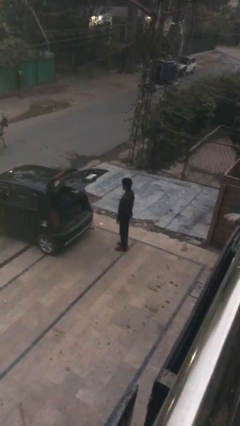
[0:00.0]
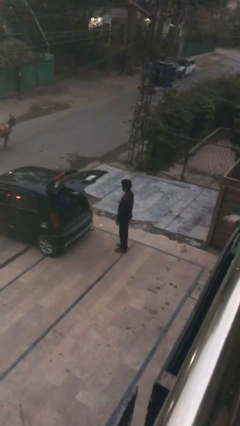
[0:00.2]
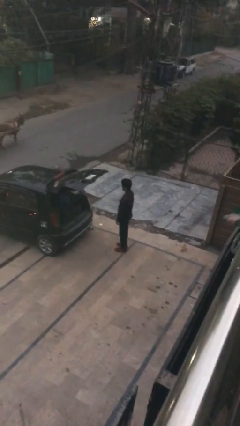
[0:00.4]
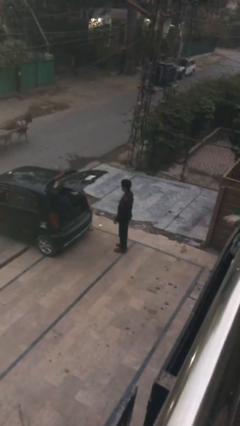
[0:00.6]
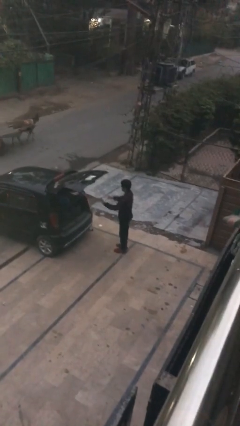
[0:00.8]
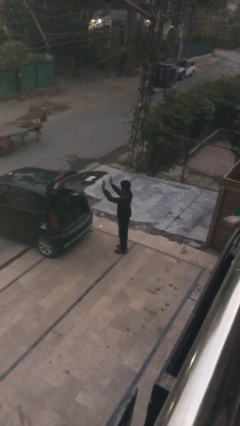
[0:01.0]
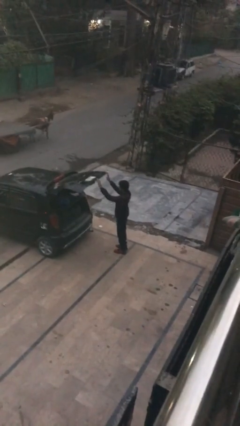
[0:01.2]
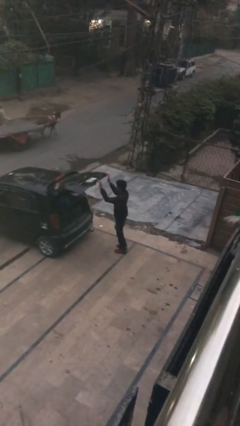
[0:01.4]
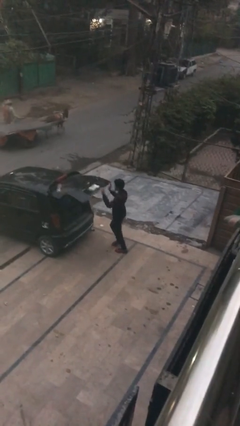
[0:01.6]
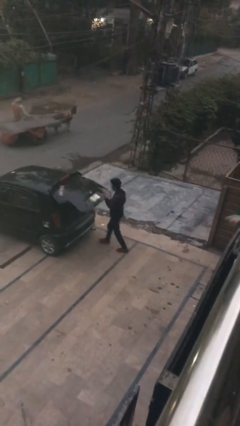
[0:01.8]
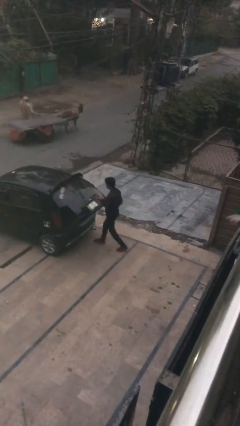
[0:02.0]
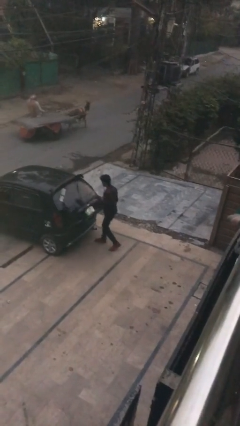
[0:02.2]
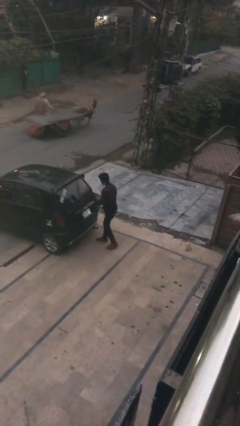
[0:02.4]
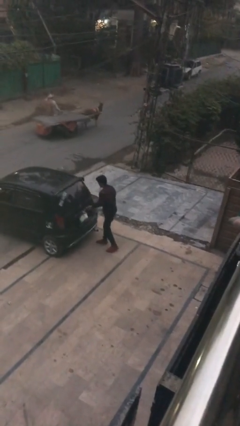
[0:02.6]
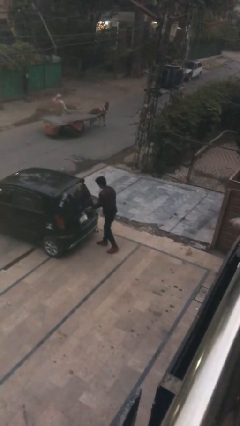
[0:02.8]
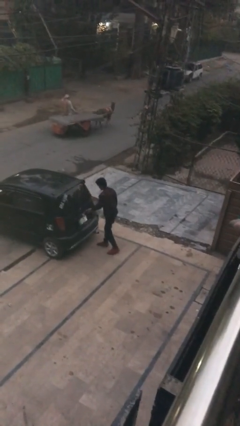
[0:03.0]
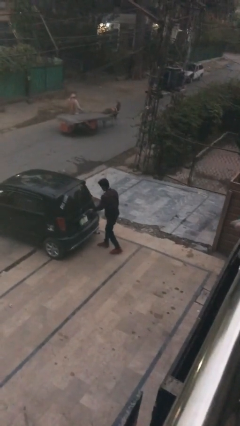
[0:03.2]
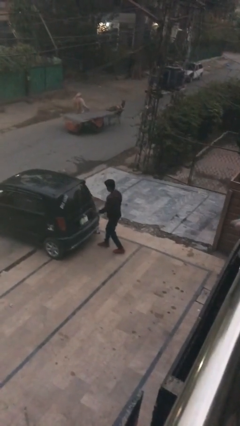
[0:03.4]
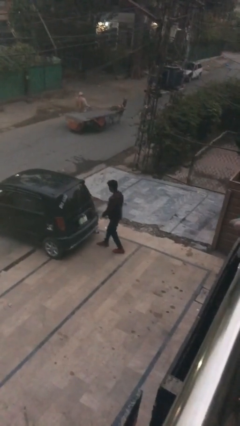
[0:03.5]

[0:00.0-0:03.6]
person closes car trunk

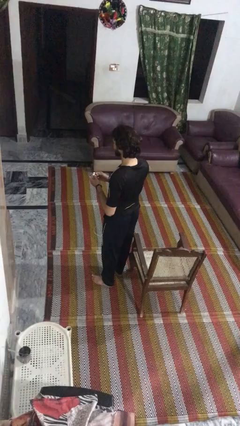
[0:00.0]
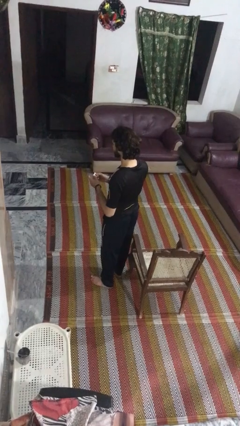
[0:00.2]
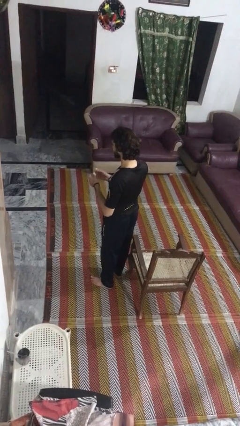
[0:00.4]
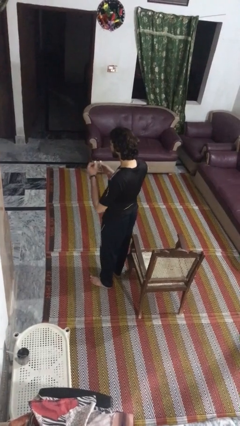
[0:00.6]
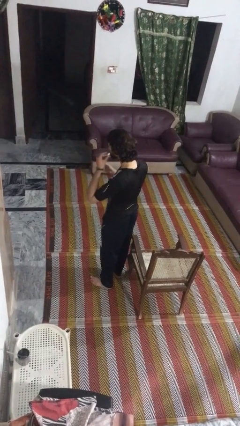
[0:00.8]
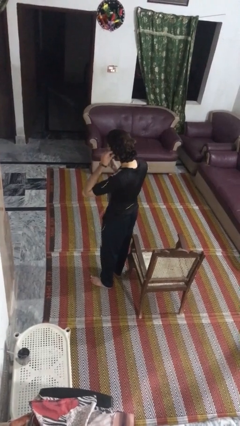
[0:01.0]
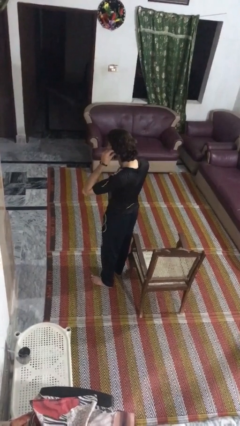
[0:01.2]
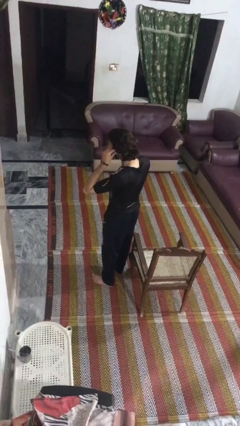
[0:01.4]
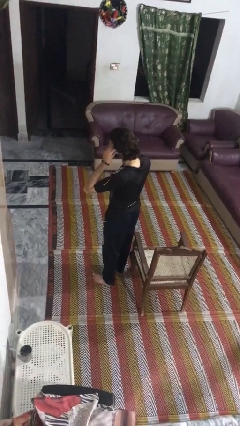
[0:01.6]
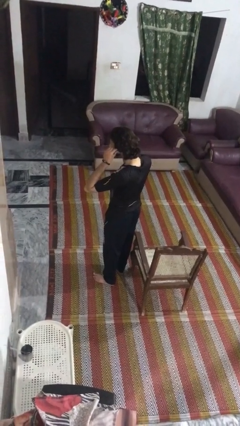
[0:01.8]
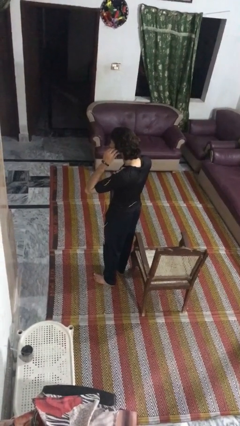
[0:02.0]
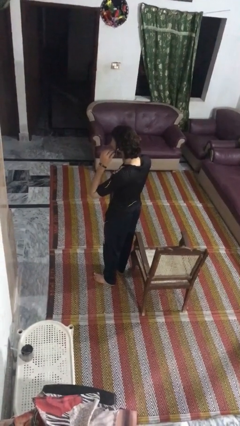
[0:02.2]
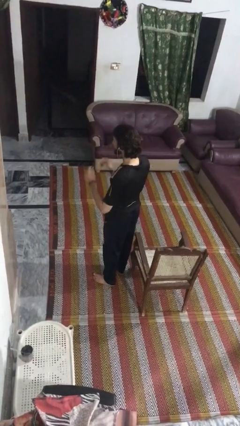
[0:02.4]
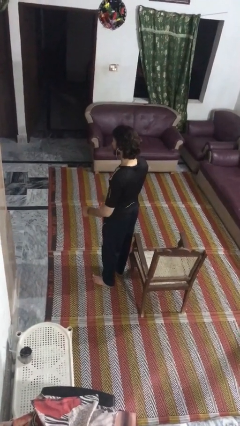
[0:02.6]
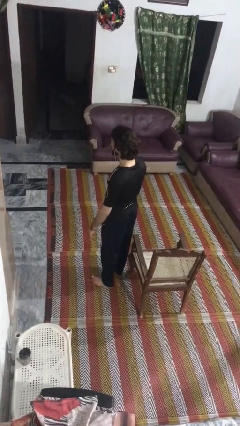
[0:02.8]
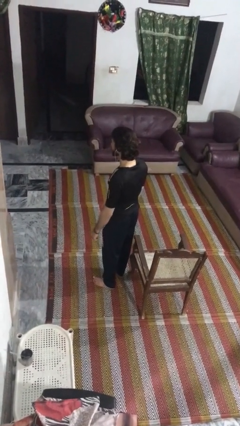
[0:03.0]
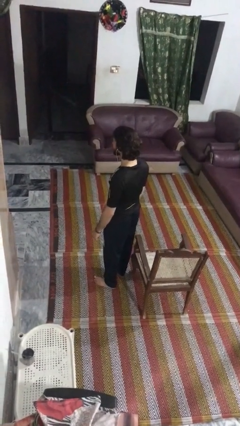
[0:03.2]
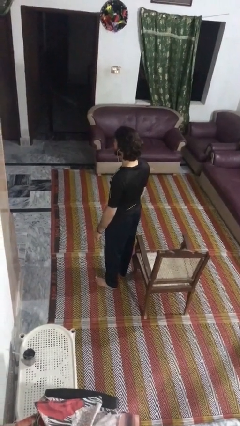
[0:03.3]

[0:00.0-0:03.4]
person puts on headphones

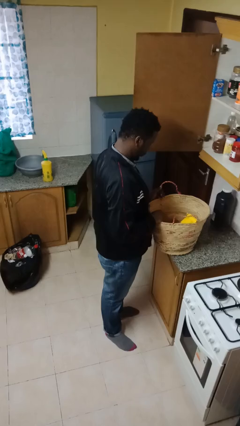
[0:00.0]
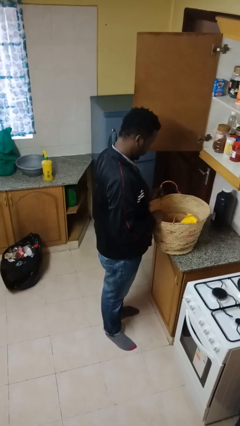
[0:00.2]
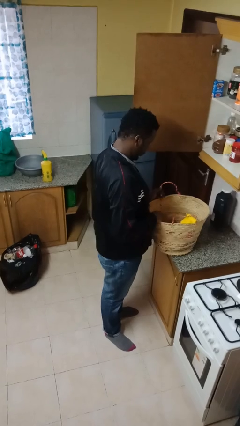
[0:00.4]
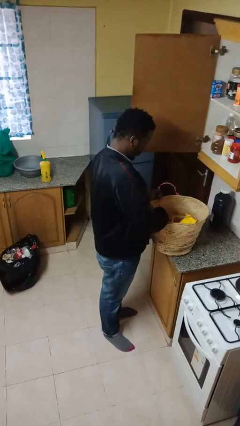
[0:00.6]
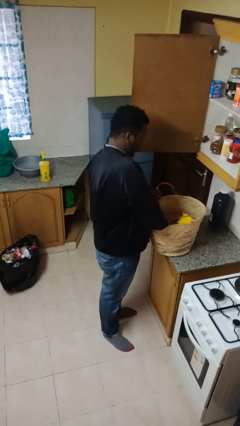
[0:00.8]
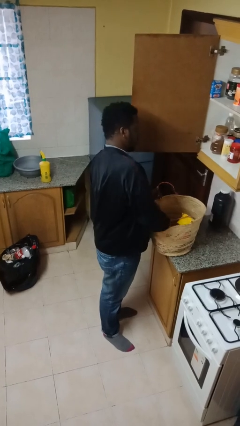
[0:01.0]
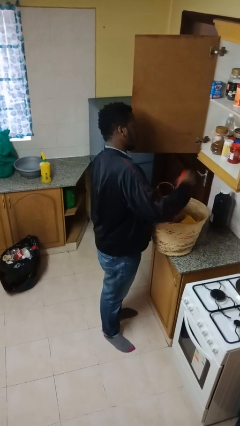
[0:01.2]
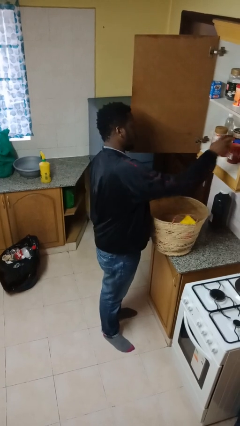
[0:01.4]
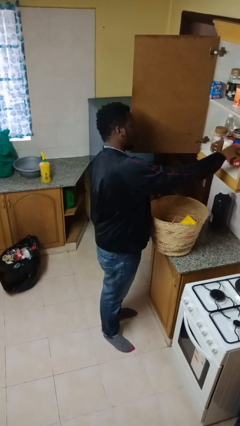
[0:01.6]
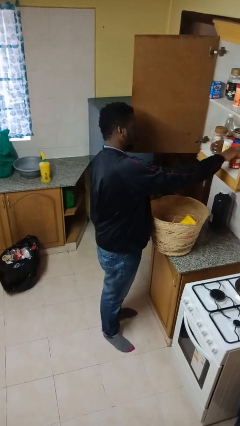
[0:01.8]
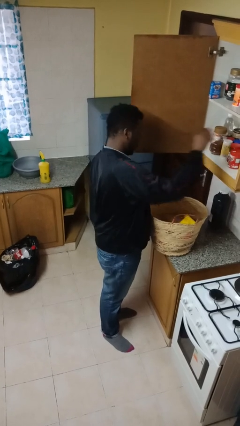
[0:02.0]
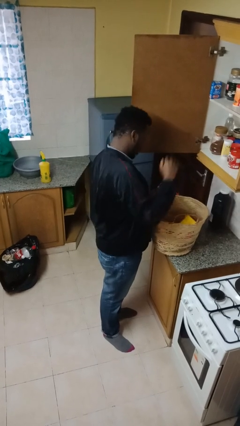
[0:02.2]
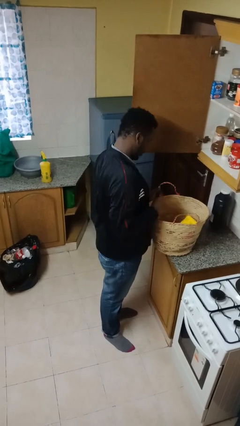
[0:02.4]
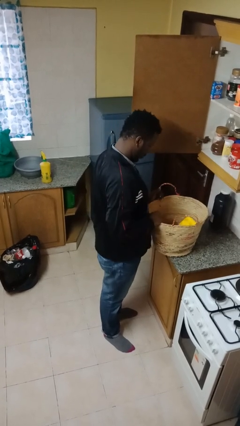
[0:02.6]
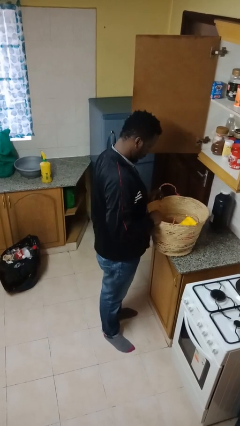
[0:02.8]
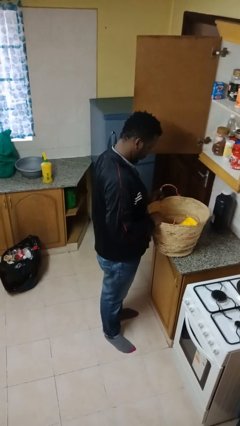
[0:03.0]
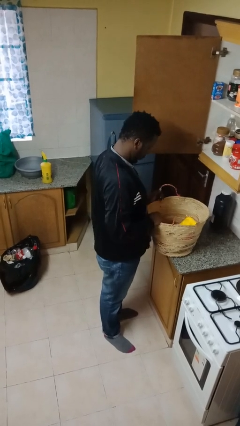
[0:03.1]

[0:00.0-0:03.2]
person loads groceries into cabinet

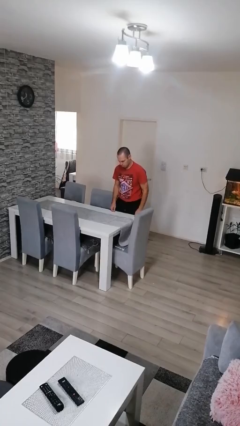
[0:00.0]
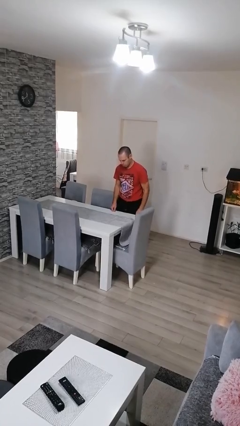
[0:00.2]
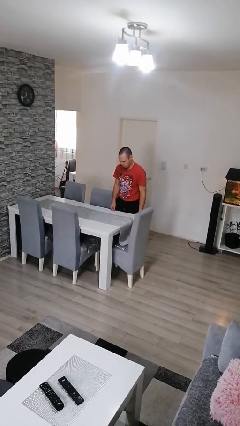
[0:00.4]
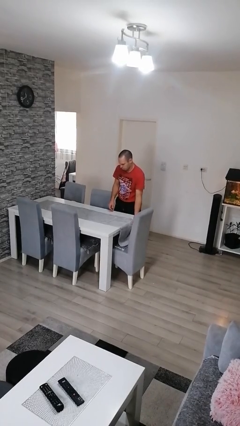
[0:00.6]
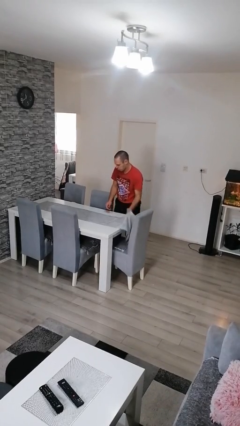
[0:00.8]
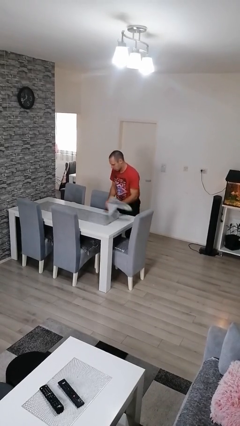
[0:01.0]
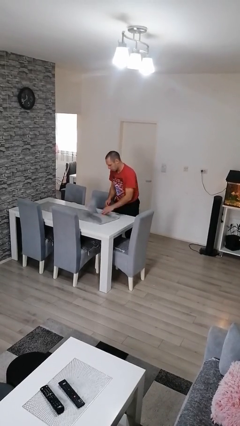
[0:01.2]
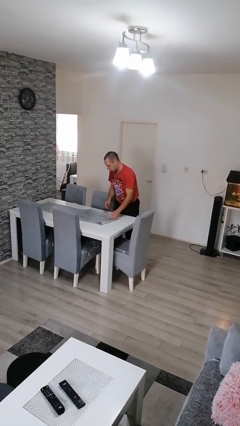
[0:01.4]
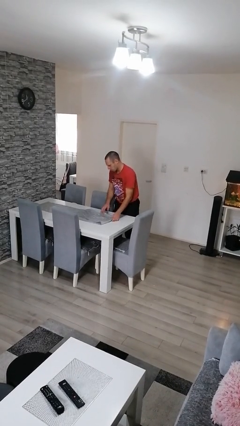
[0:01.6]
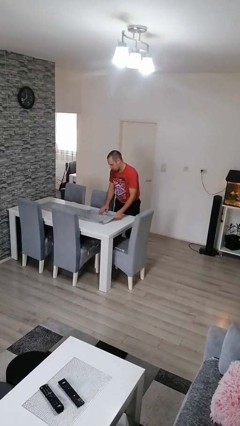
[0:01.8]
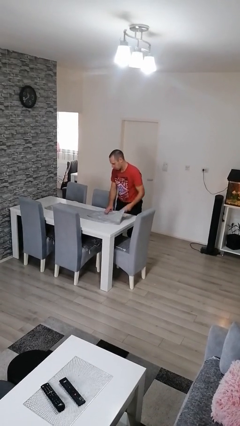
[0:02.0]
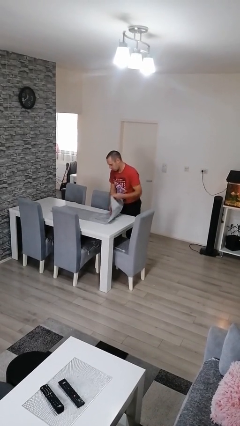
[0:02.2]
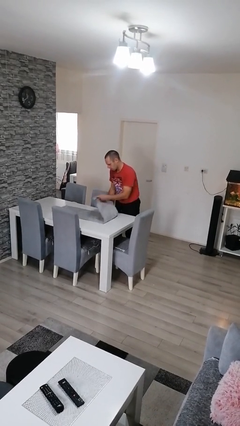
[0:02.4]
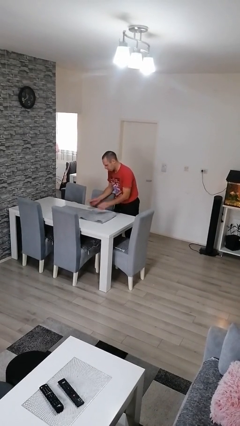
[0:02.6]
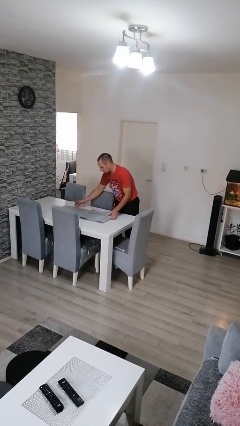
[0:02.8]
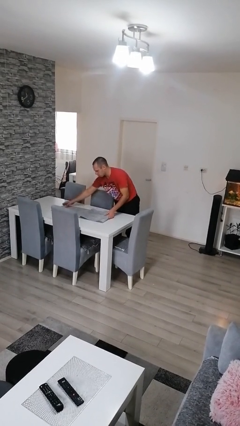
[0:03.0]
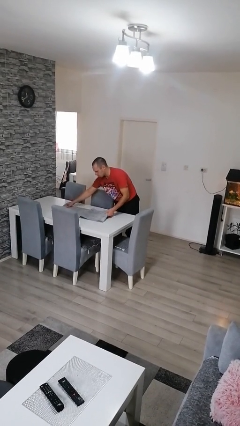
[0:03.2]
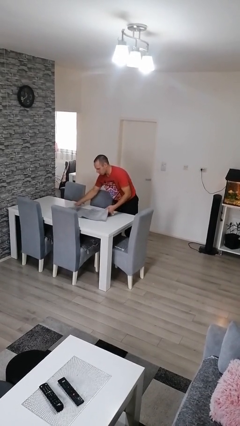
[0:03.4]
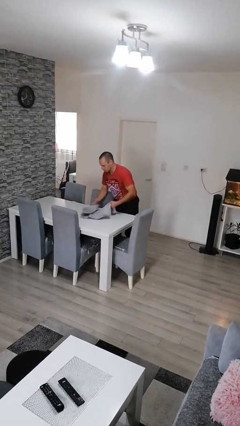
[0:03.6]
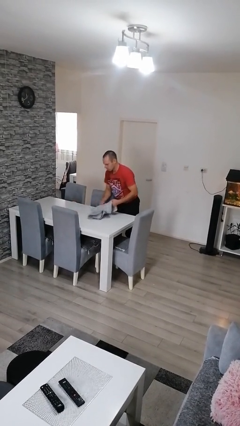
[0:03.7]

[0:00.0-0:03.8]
person folds tablecloth

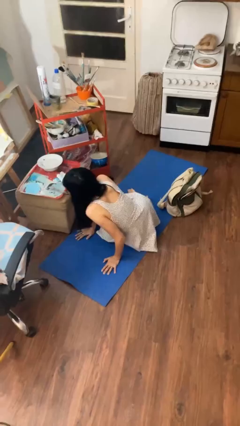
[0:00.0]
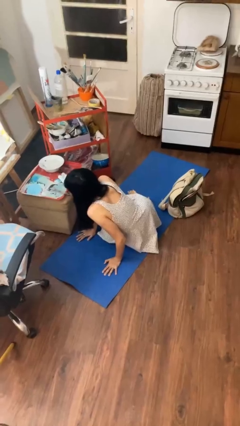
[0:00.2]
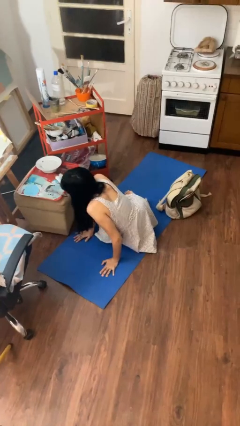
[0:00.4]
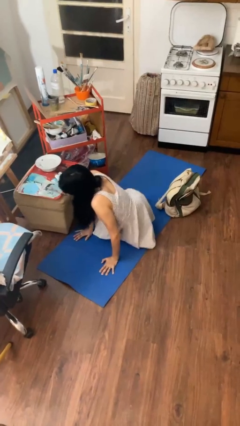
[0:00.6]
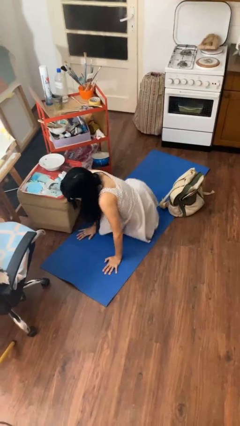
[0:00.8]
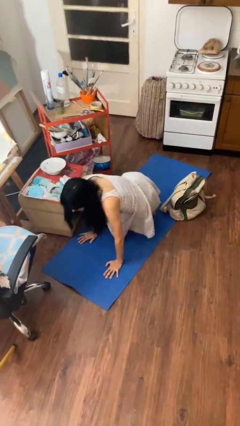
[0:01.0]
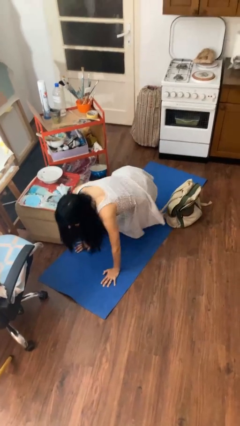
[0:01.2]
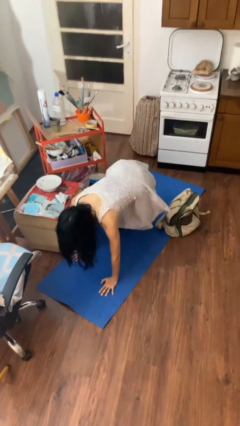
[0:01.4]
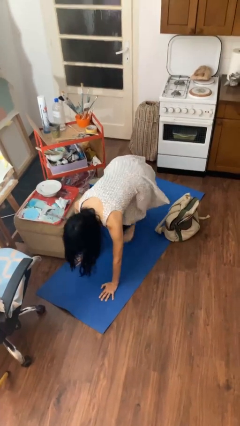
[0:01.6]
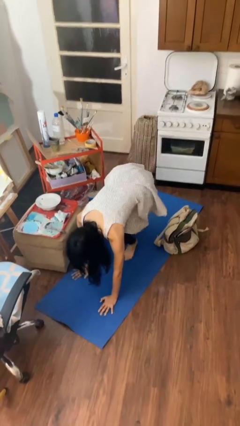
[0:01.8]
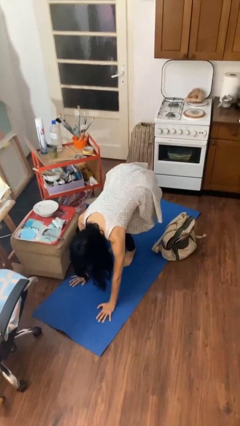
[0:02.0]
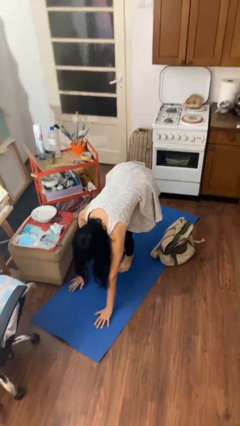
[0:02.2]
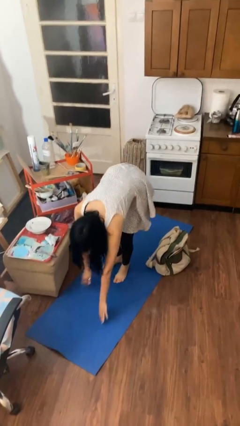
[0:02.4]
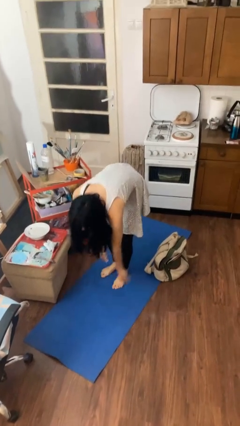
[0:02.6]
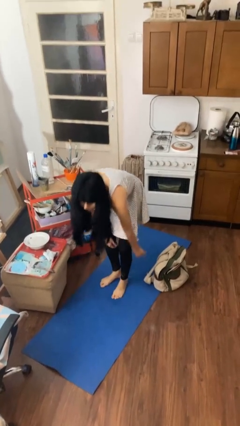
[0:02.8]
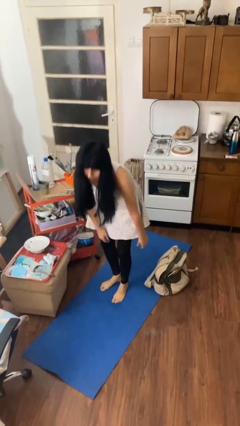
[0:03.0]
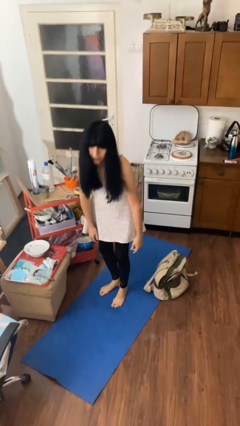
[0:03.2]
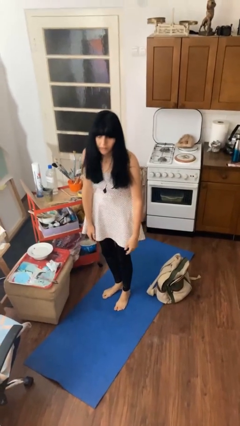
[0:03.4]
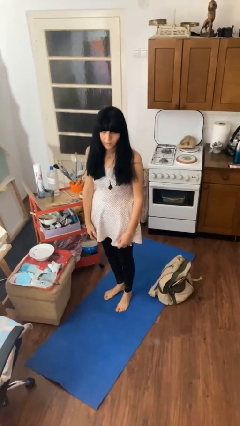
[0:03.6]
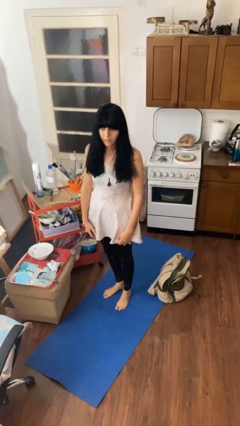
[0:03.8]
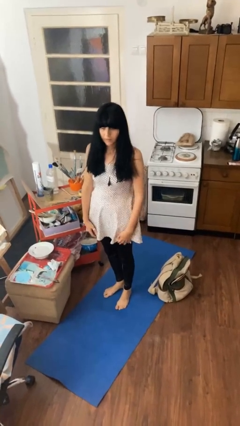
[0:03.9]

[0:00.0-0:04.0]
person stands up from floor
